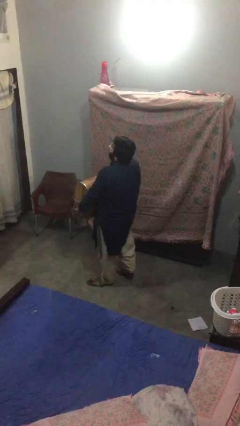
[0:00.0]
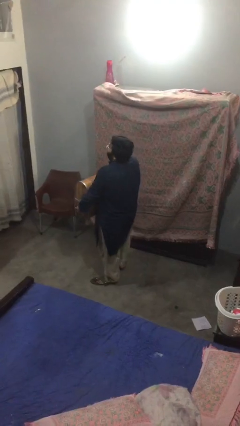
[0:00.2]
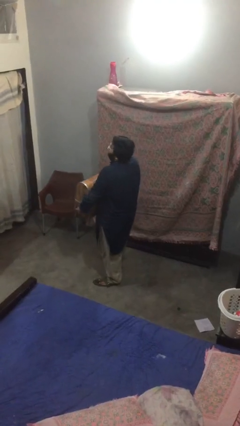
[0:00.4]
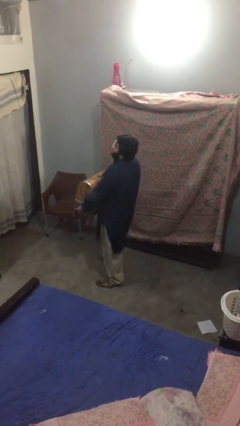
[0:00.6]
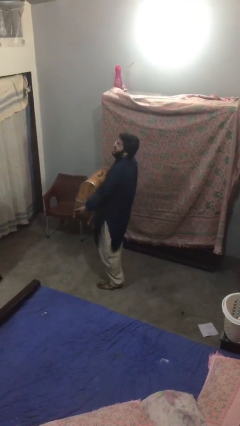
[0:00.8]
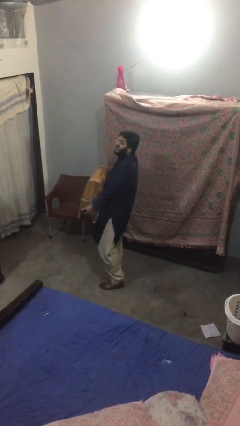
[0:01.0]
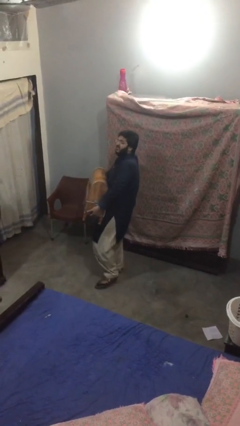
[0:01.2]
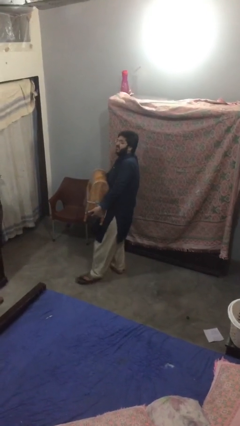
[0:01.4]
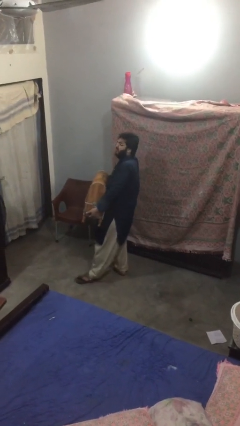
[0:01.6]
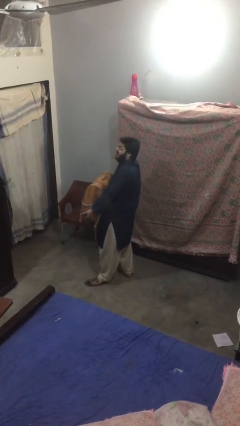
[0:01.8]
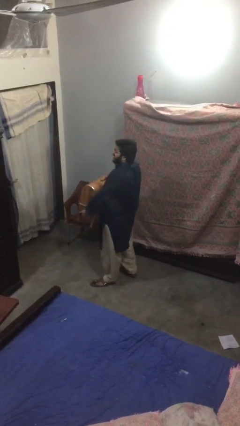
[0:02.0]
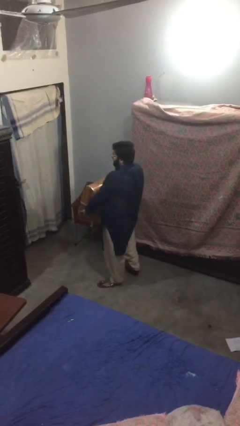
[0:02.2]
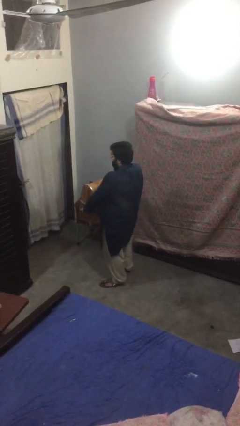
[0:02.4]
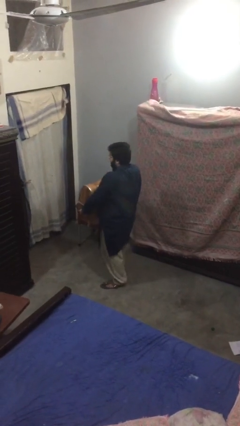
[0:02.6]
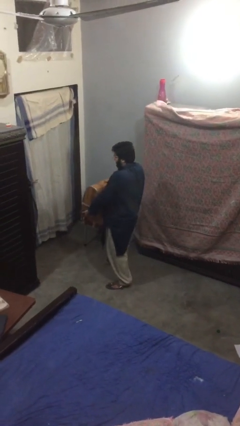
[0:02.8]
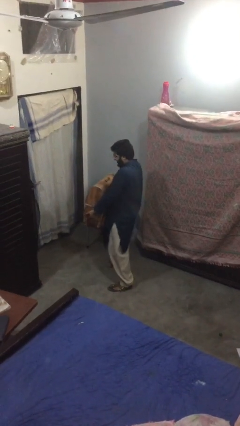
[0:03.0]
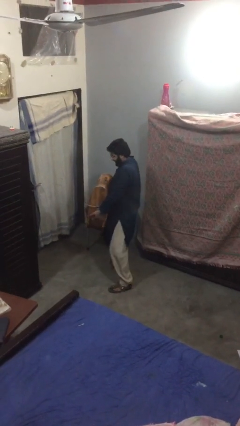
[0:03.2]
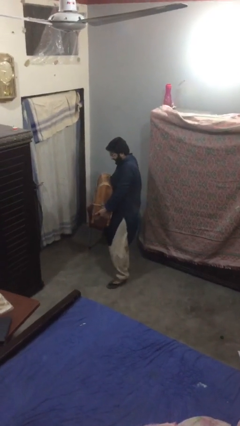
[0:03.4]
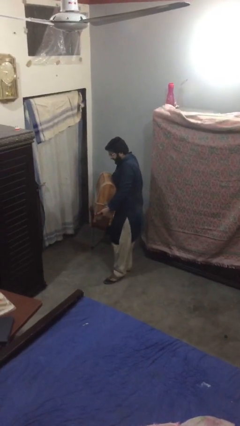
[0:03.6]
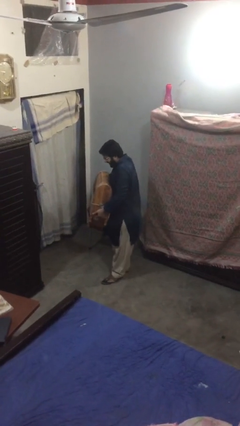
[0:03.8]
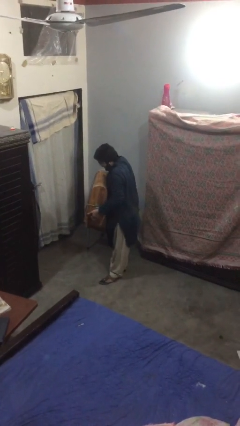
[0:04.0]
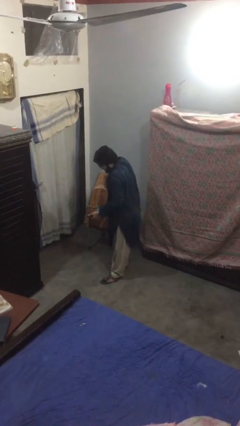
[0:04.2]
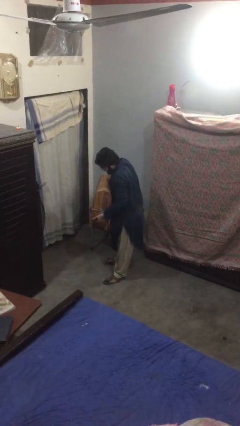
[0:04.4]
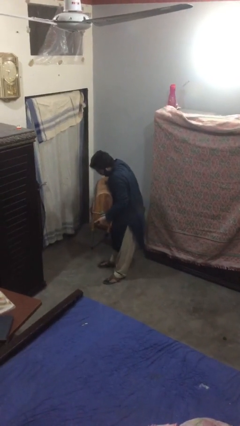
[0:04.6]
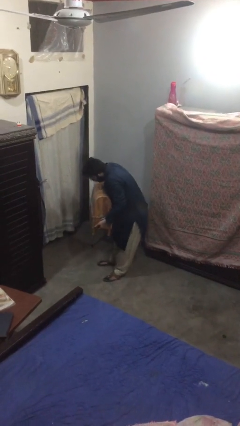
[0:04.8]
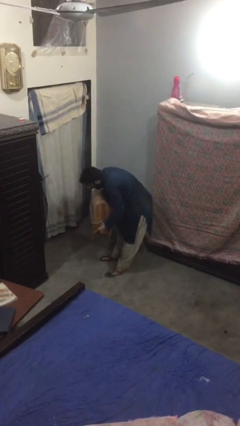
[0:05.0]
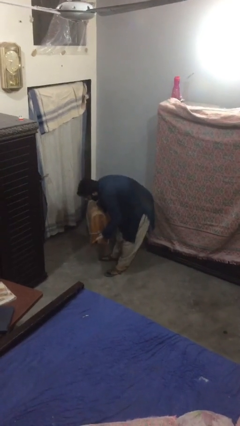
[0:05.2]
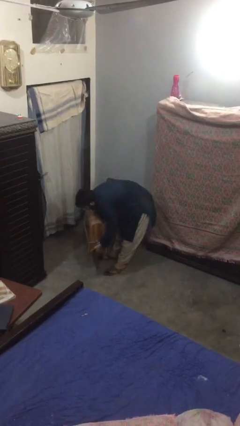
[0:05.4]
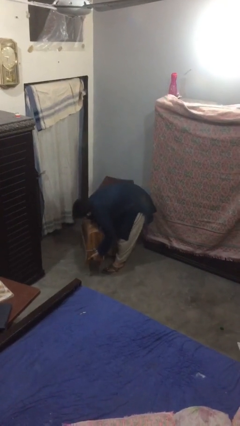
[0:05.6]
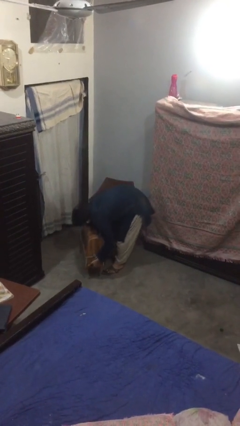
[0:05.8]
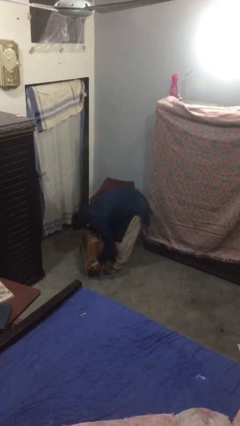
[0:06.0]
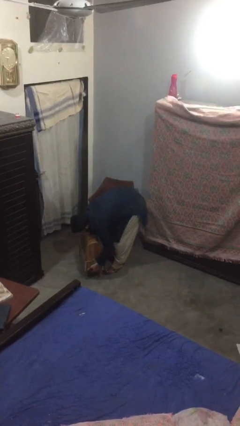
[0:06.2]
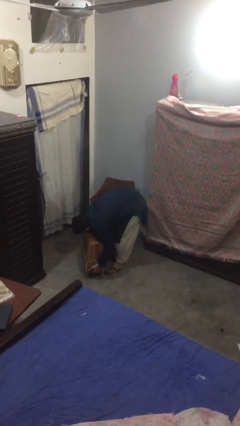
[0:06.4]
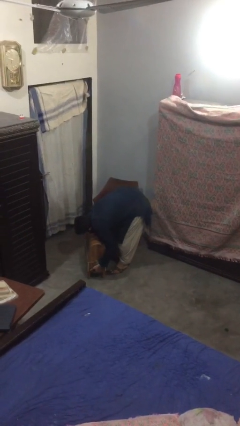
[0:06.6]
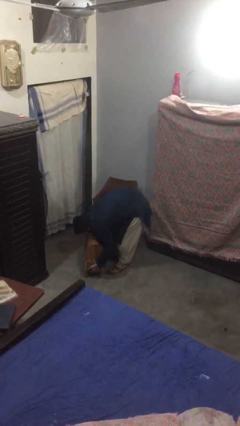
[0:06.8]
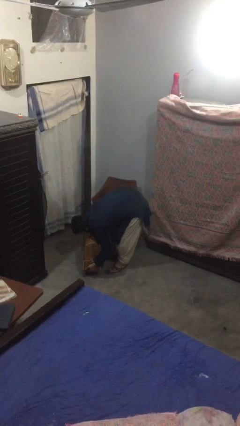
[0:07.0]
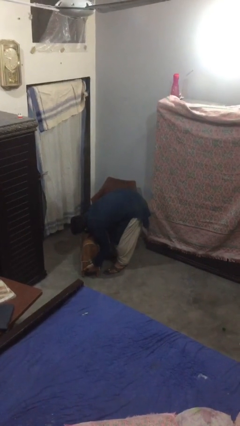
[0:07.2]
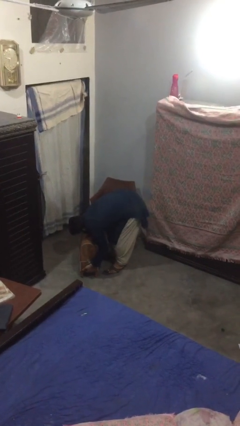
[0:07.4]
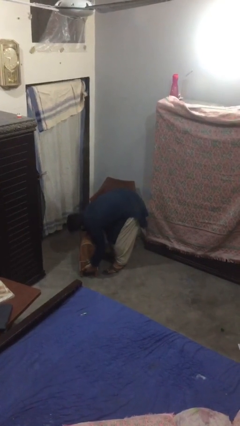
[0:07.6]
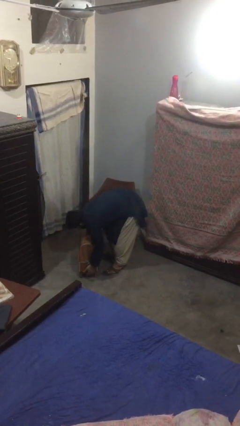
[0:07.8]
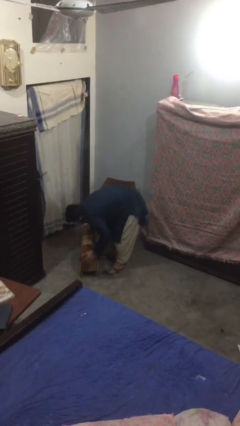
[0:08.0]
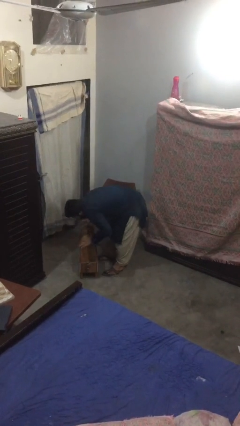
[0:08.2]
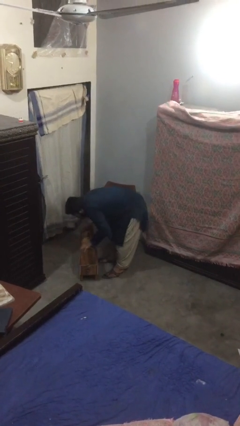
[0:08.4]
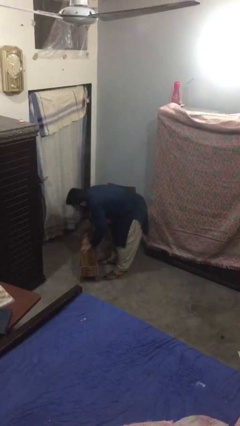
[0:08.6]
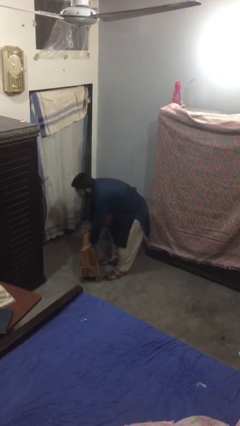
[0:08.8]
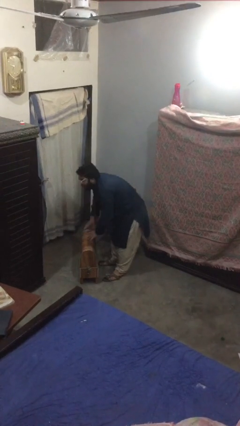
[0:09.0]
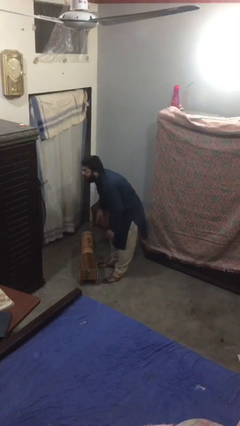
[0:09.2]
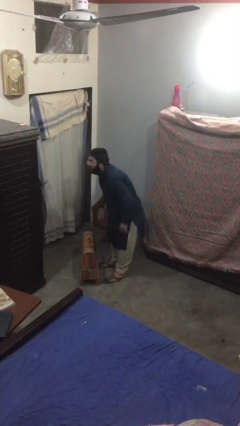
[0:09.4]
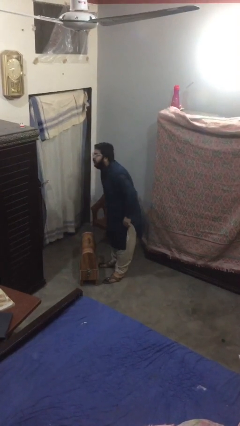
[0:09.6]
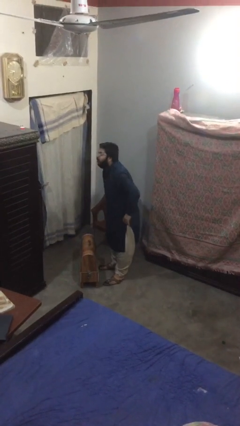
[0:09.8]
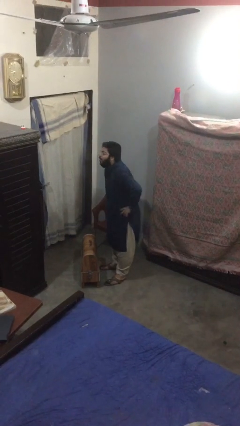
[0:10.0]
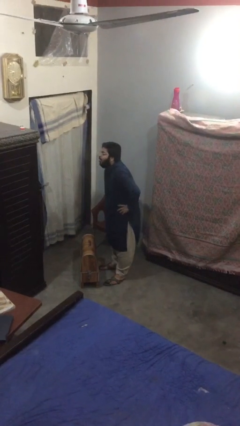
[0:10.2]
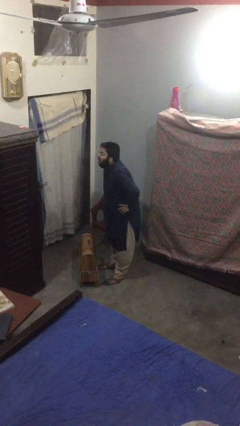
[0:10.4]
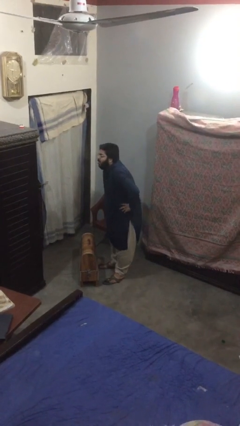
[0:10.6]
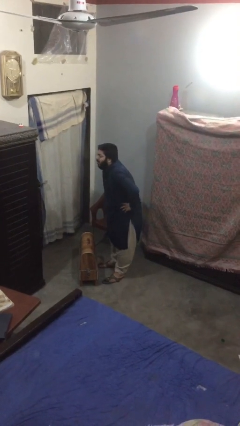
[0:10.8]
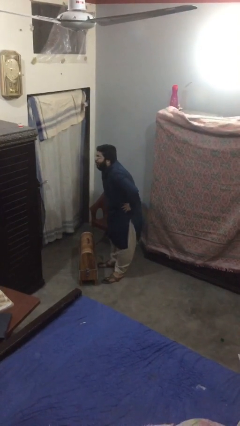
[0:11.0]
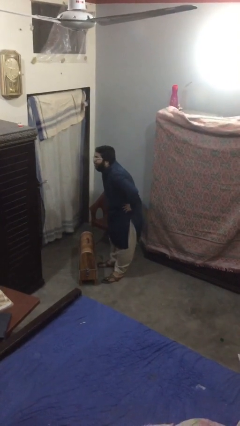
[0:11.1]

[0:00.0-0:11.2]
person puts down object on floor

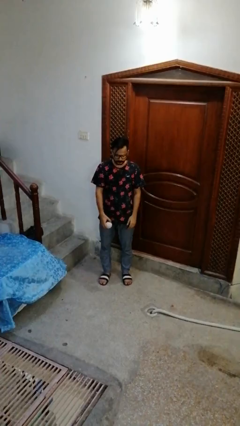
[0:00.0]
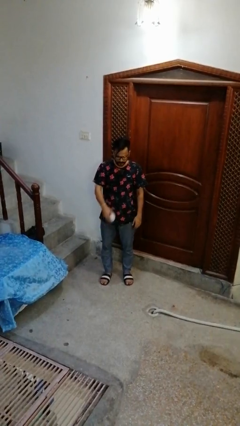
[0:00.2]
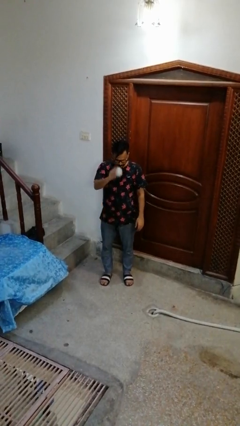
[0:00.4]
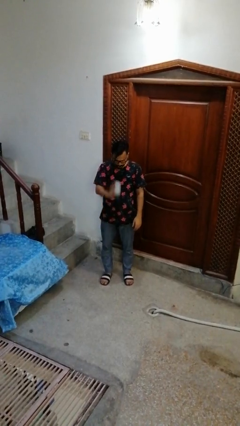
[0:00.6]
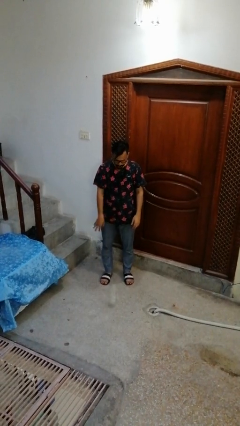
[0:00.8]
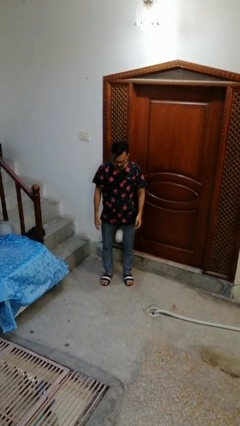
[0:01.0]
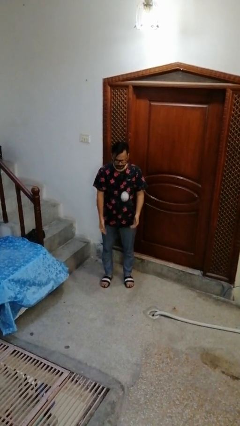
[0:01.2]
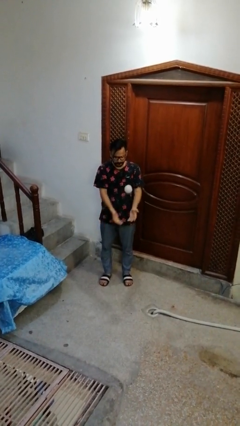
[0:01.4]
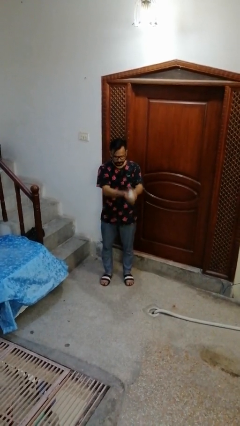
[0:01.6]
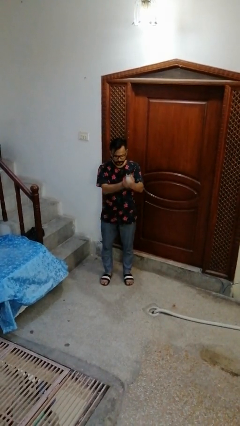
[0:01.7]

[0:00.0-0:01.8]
person bounces ball on floor

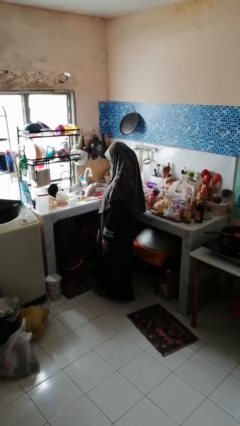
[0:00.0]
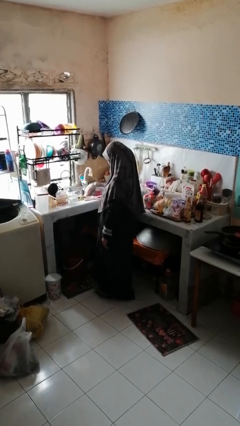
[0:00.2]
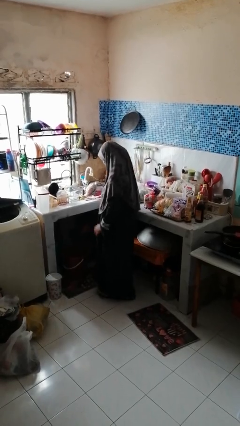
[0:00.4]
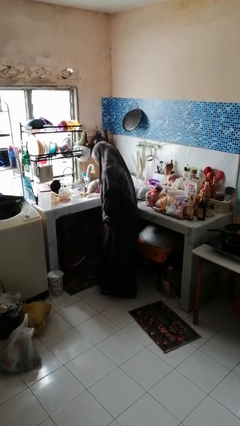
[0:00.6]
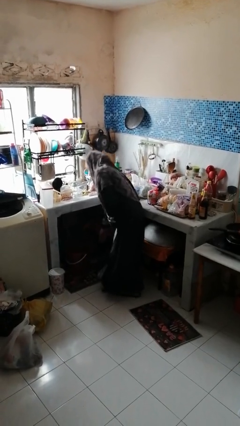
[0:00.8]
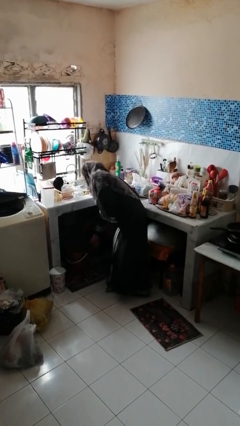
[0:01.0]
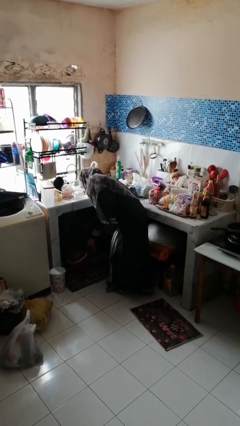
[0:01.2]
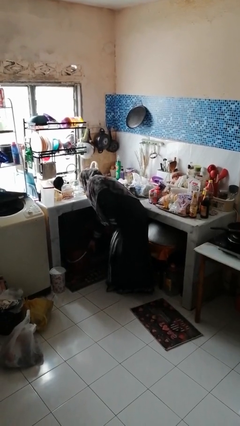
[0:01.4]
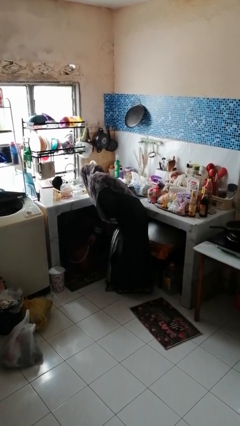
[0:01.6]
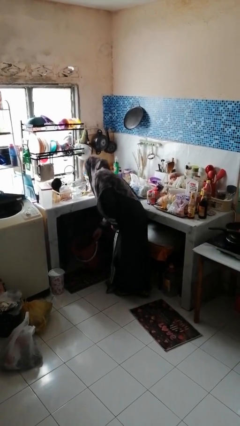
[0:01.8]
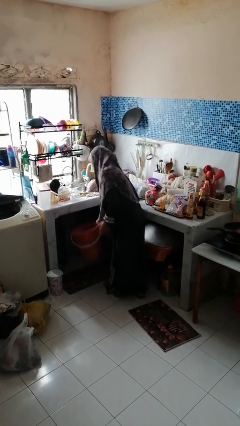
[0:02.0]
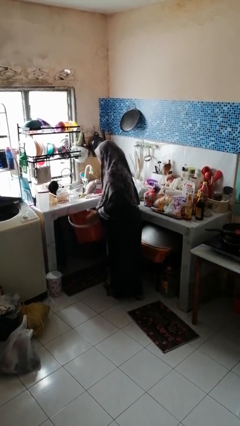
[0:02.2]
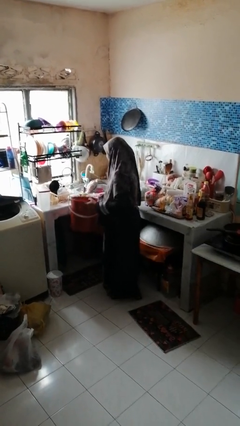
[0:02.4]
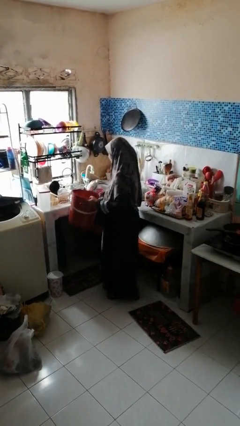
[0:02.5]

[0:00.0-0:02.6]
person picks up object from cabinet

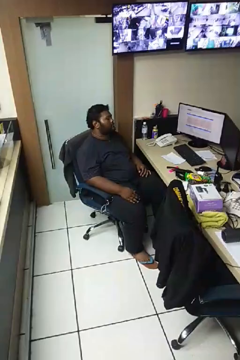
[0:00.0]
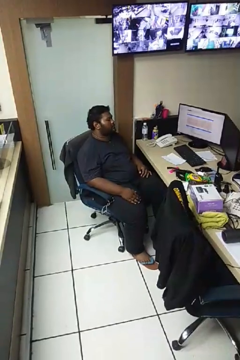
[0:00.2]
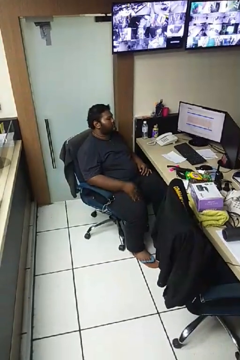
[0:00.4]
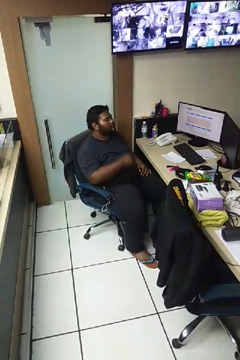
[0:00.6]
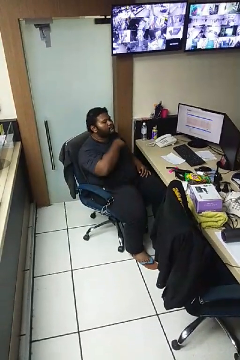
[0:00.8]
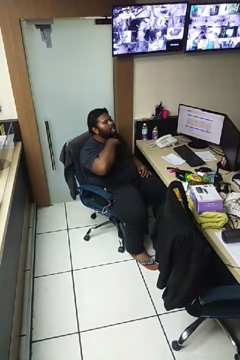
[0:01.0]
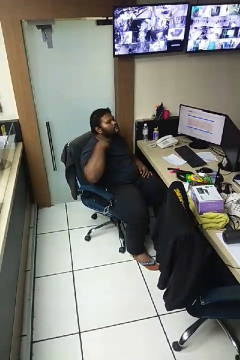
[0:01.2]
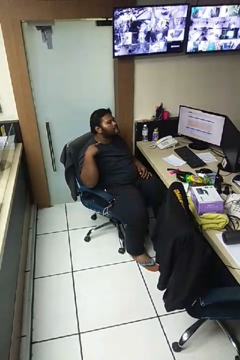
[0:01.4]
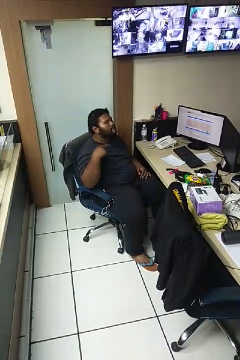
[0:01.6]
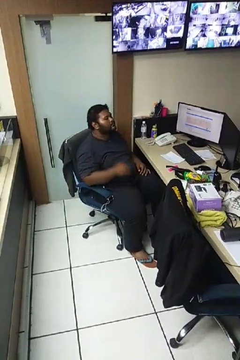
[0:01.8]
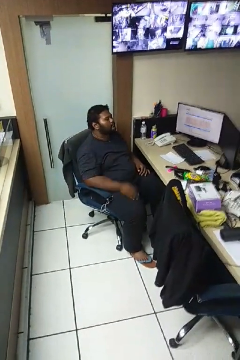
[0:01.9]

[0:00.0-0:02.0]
person gestures cut
